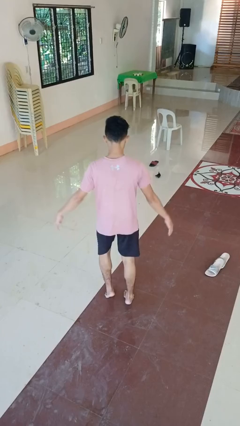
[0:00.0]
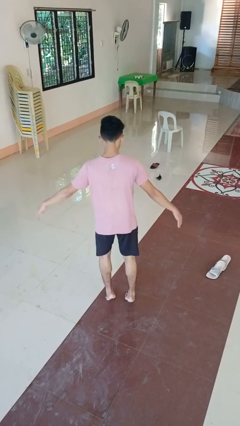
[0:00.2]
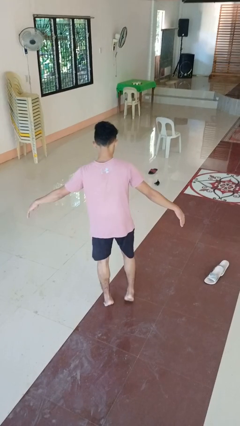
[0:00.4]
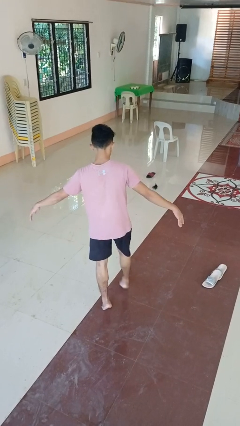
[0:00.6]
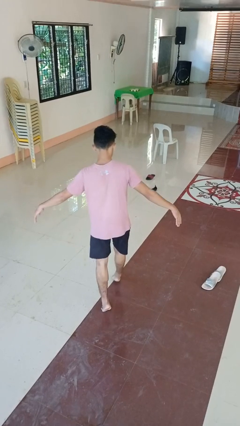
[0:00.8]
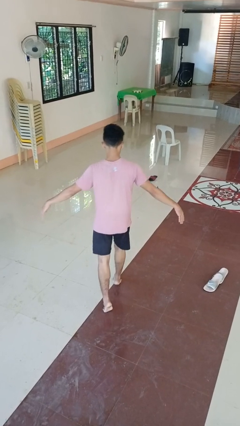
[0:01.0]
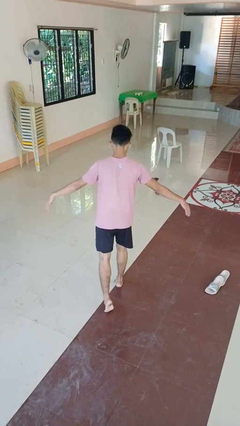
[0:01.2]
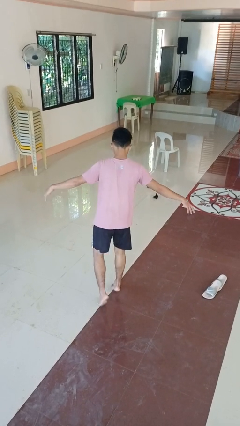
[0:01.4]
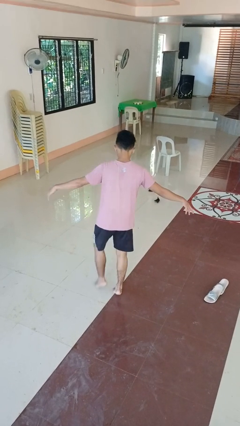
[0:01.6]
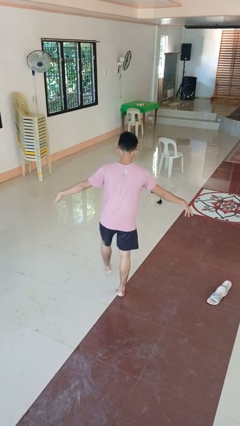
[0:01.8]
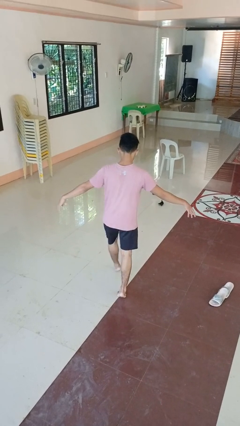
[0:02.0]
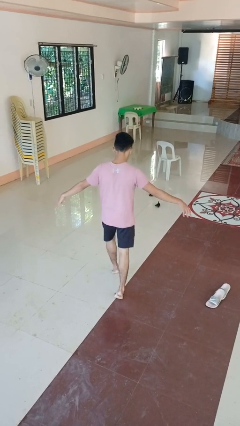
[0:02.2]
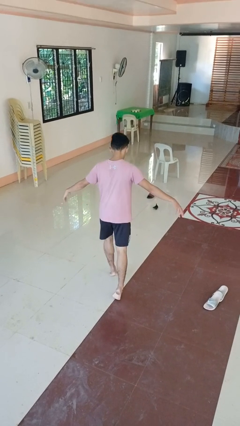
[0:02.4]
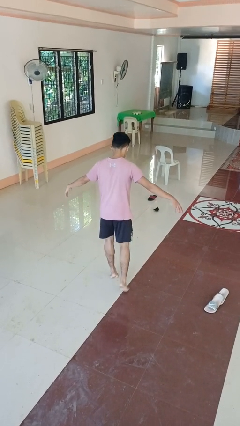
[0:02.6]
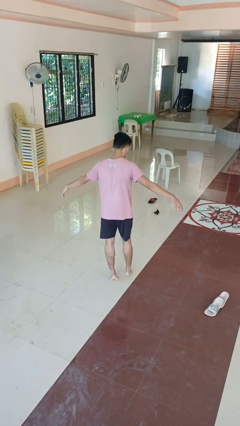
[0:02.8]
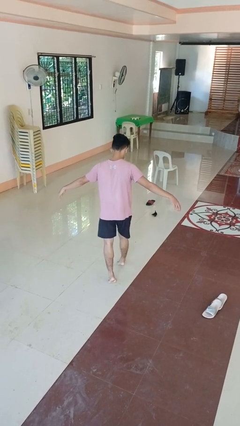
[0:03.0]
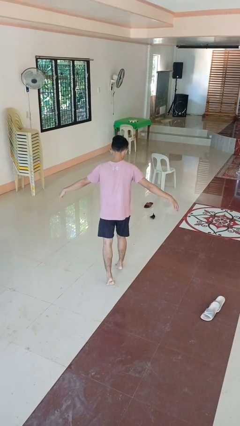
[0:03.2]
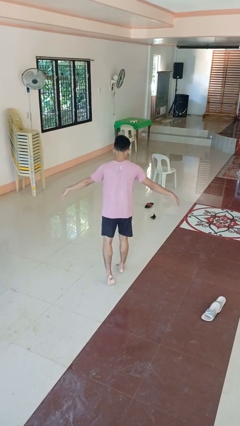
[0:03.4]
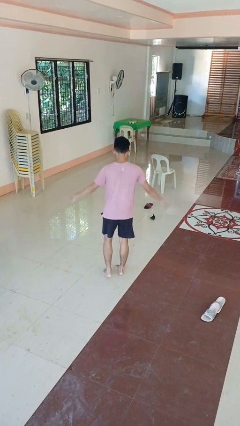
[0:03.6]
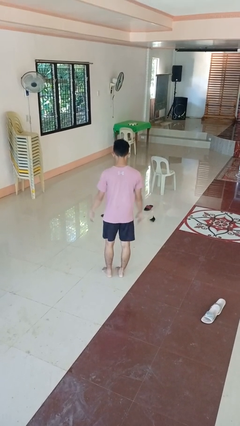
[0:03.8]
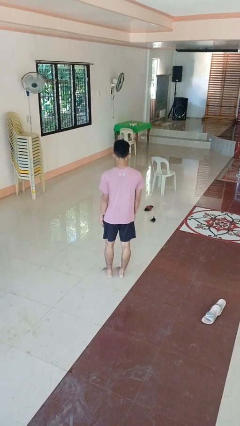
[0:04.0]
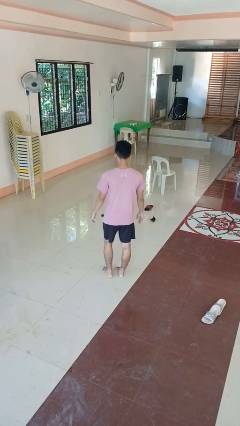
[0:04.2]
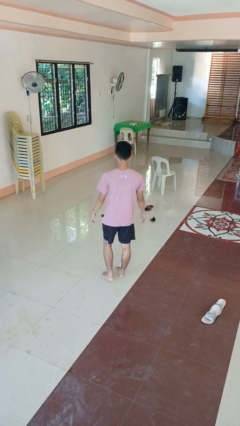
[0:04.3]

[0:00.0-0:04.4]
person walks tiptoe

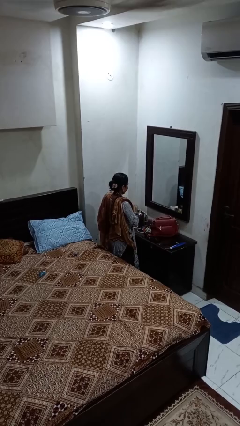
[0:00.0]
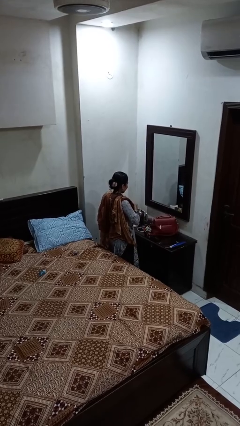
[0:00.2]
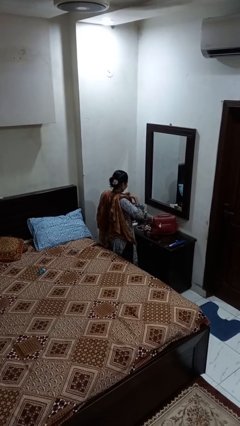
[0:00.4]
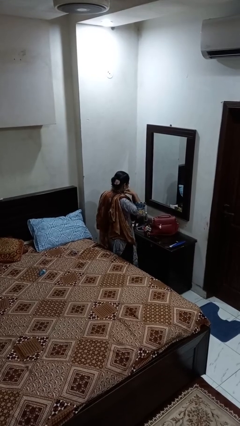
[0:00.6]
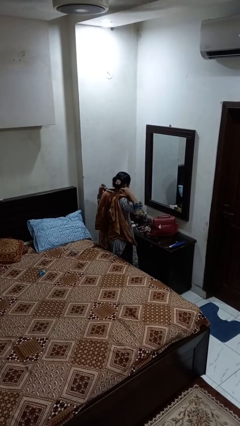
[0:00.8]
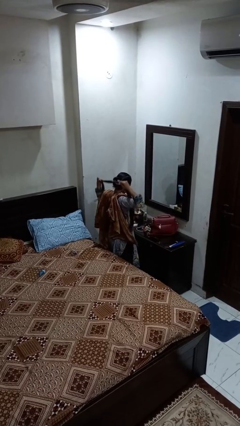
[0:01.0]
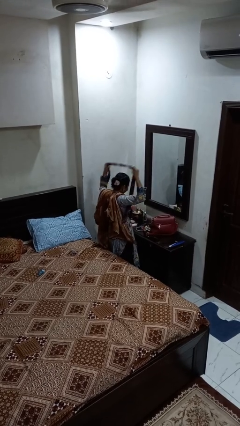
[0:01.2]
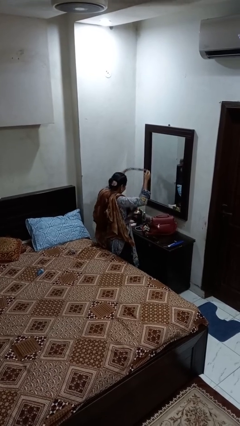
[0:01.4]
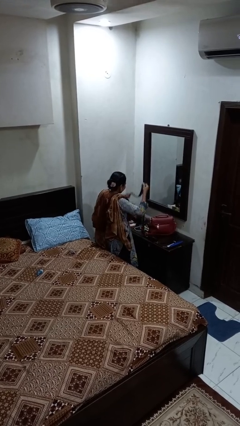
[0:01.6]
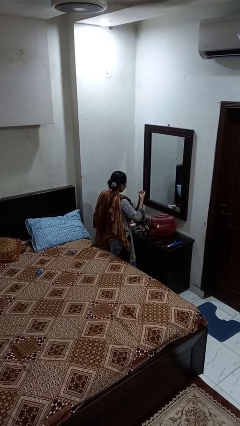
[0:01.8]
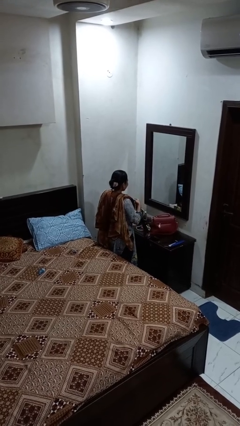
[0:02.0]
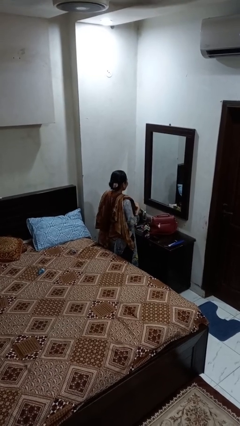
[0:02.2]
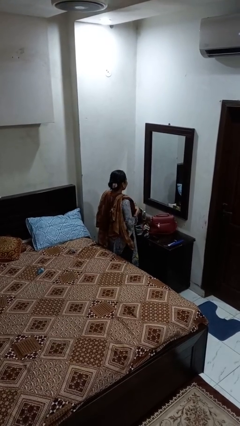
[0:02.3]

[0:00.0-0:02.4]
person takes off necktie

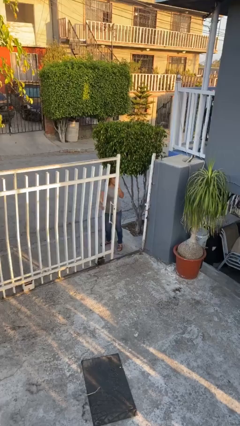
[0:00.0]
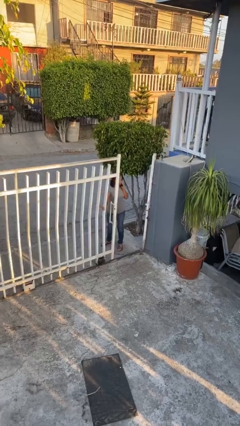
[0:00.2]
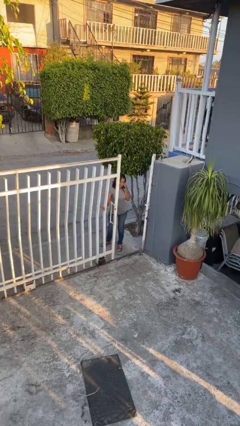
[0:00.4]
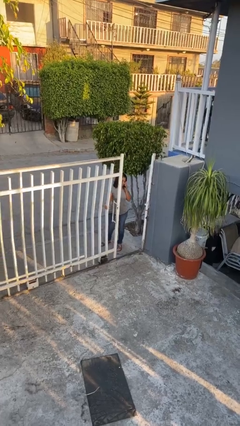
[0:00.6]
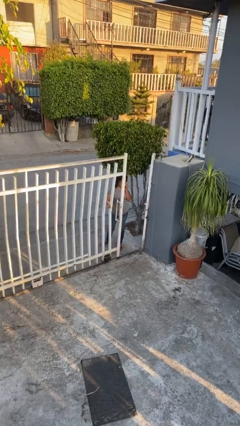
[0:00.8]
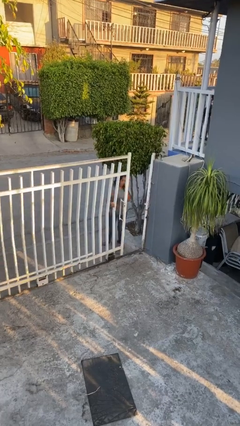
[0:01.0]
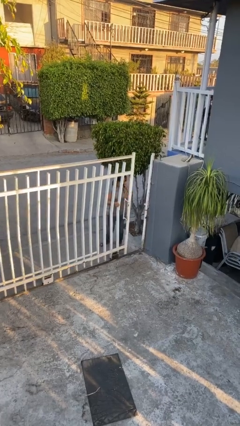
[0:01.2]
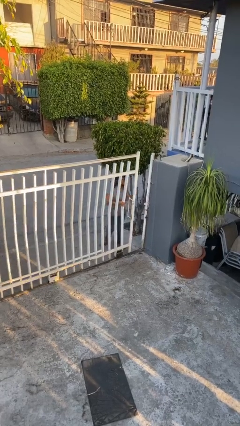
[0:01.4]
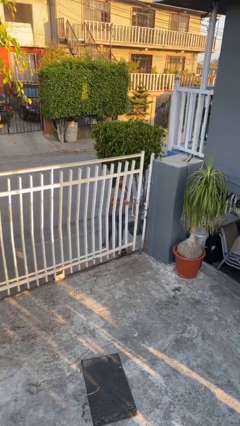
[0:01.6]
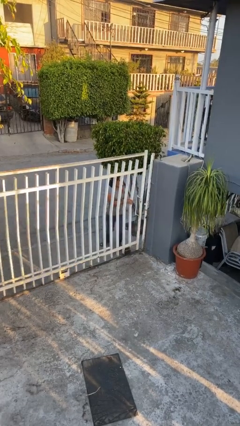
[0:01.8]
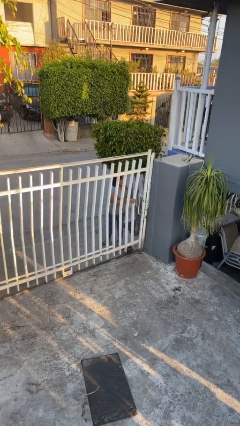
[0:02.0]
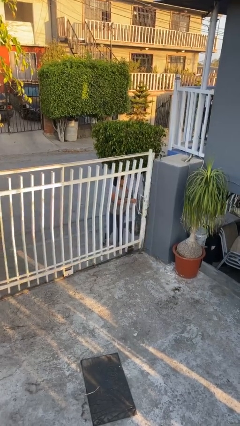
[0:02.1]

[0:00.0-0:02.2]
person closes facility door

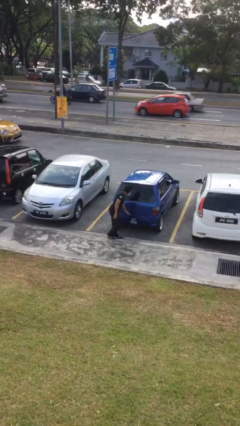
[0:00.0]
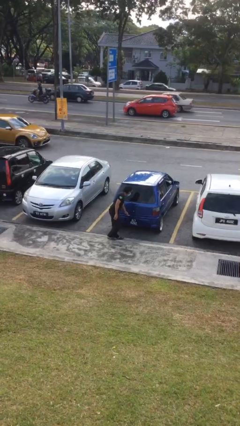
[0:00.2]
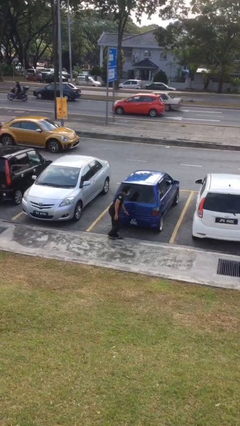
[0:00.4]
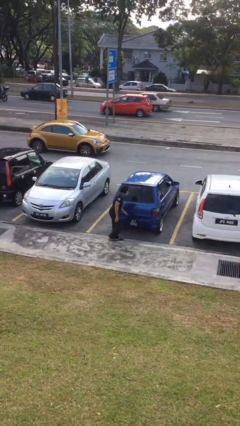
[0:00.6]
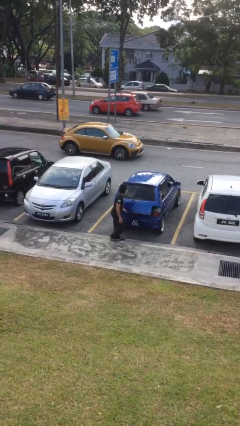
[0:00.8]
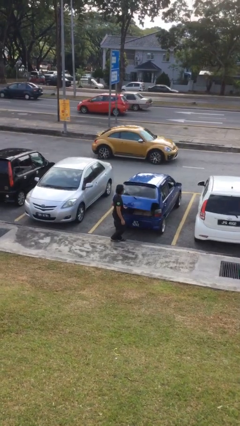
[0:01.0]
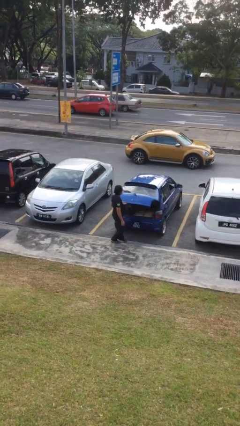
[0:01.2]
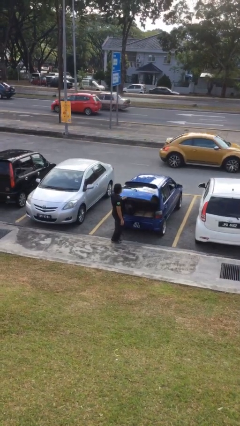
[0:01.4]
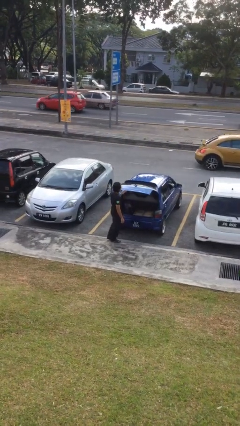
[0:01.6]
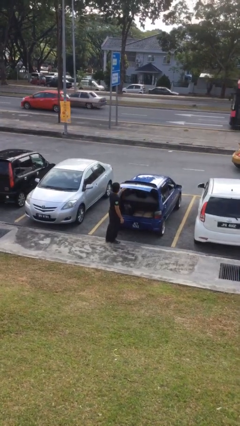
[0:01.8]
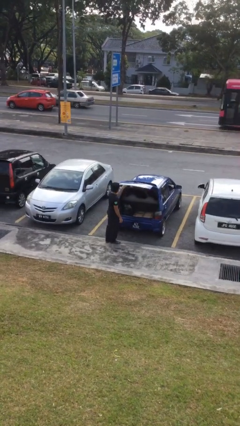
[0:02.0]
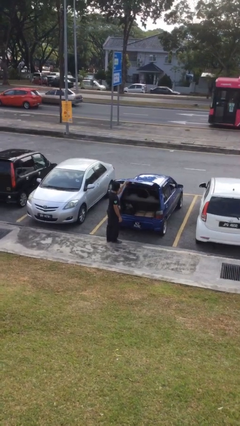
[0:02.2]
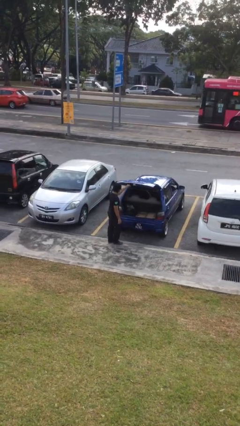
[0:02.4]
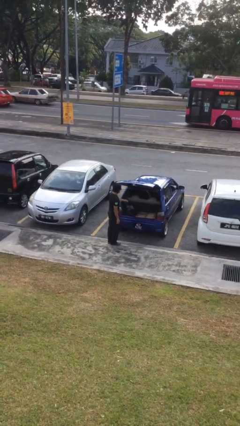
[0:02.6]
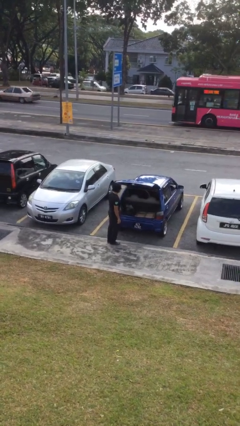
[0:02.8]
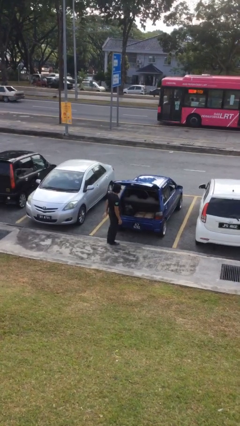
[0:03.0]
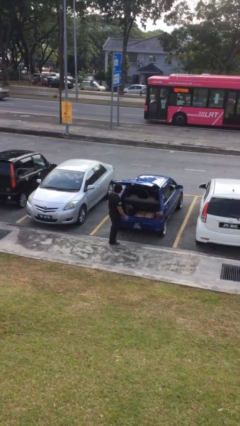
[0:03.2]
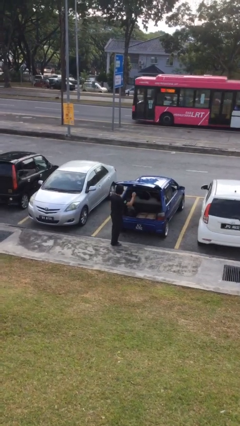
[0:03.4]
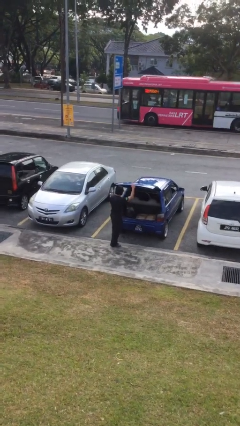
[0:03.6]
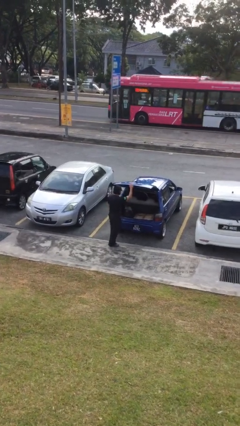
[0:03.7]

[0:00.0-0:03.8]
person opens car trunk

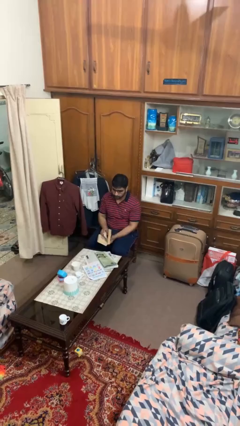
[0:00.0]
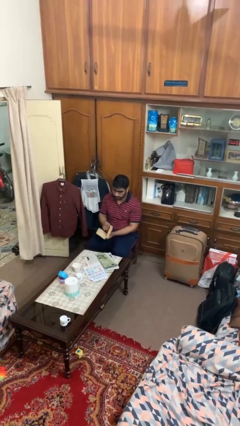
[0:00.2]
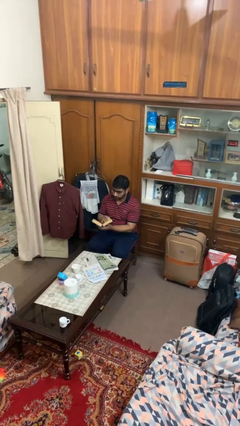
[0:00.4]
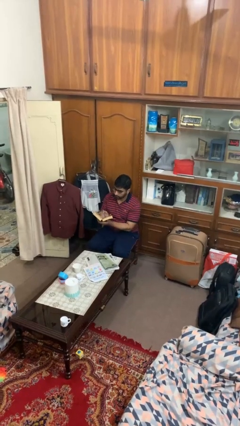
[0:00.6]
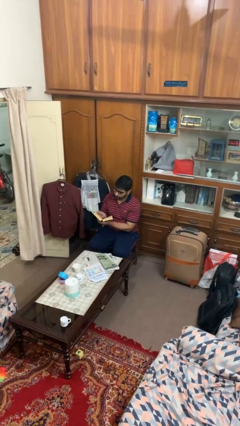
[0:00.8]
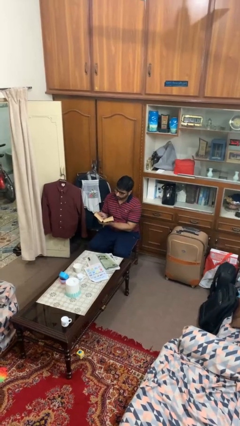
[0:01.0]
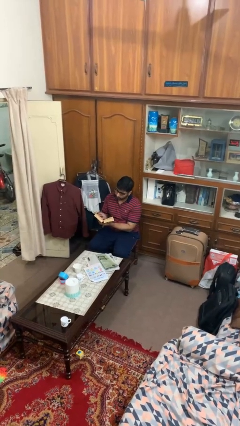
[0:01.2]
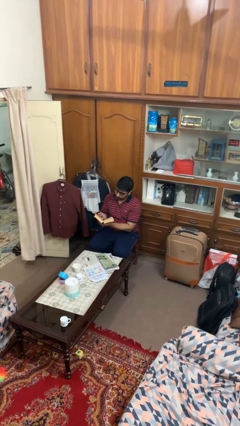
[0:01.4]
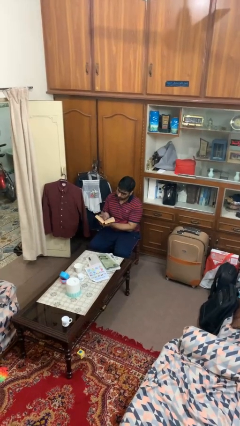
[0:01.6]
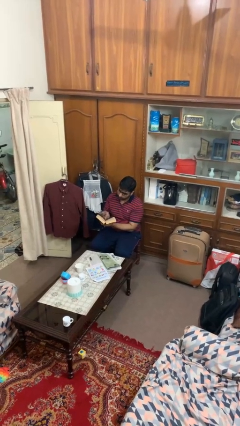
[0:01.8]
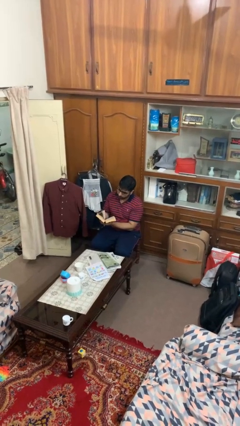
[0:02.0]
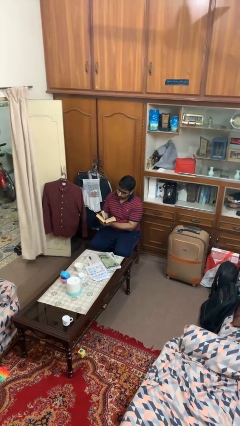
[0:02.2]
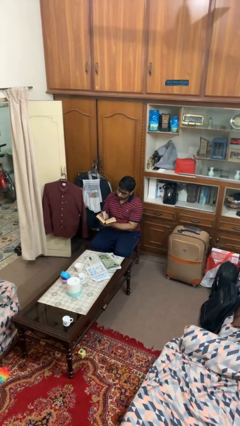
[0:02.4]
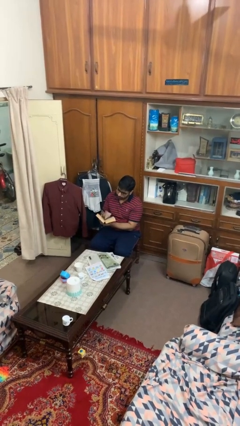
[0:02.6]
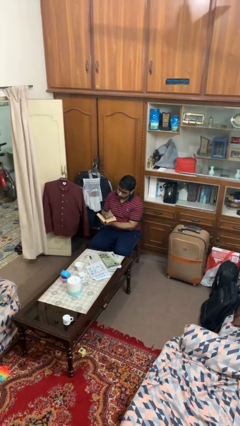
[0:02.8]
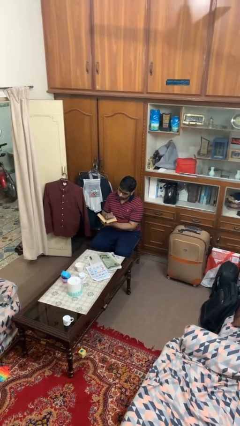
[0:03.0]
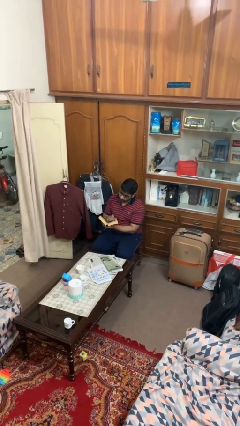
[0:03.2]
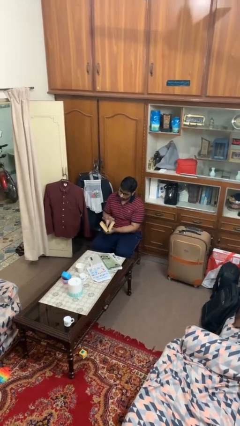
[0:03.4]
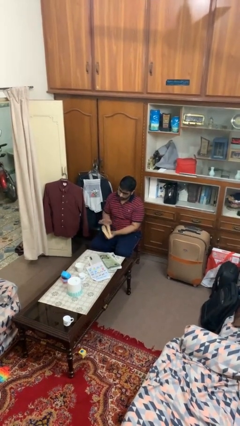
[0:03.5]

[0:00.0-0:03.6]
person reads book

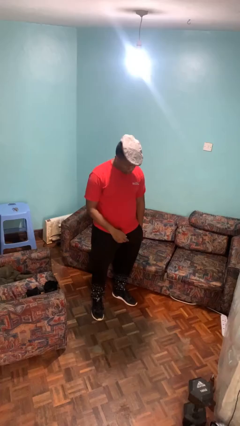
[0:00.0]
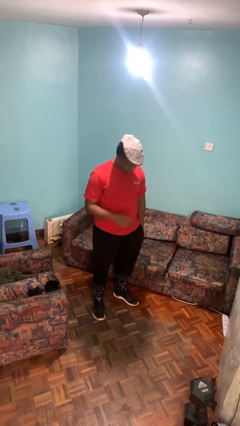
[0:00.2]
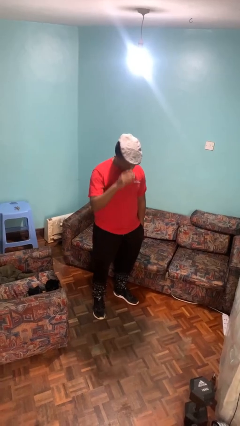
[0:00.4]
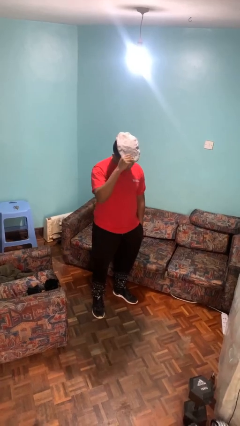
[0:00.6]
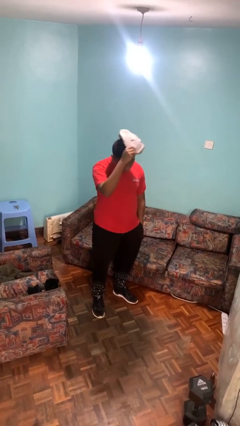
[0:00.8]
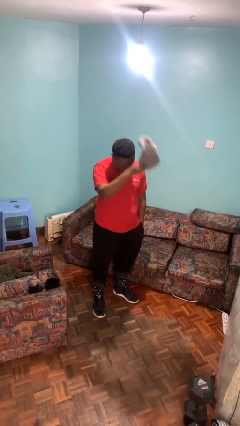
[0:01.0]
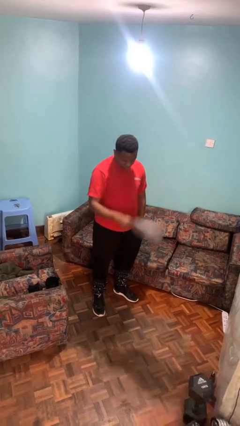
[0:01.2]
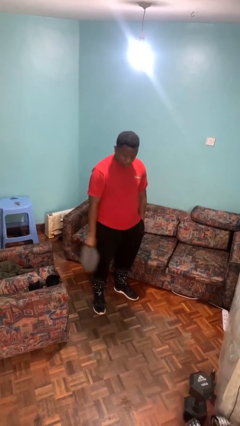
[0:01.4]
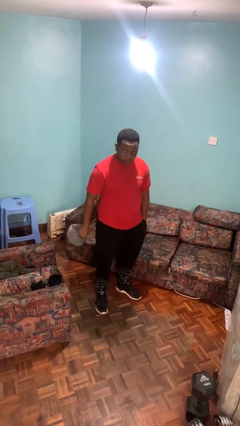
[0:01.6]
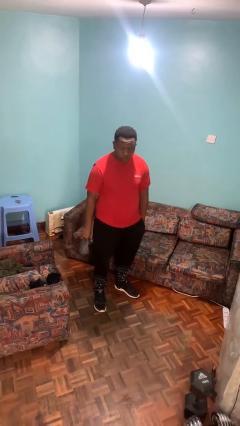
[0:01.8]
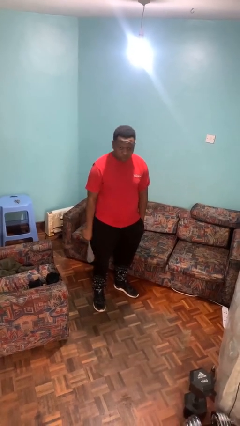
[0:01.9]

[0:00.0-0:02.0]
person takes off hat
